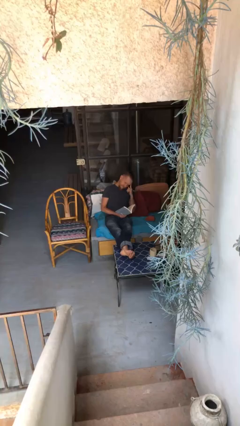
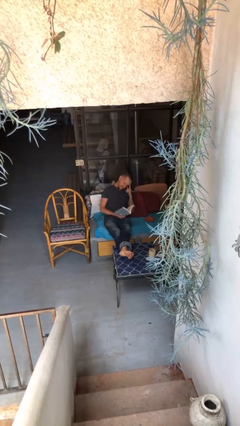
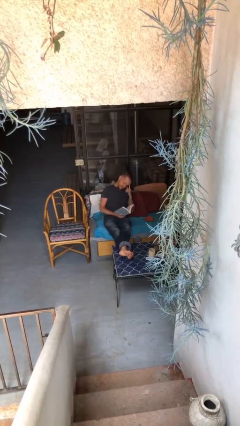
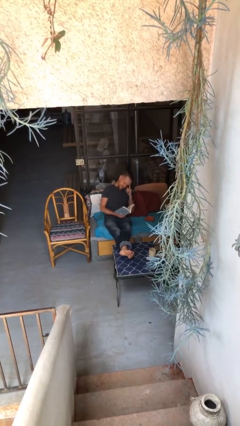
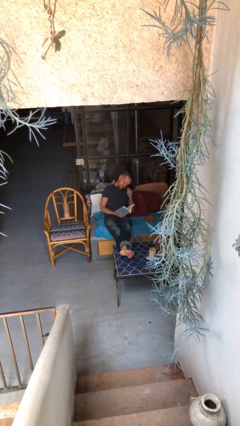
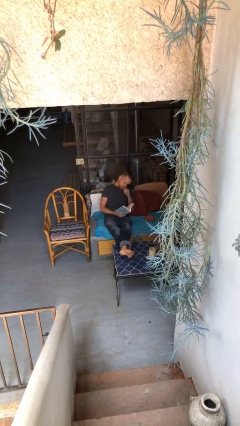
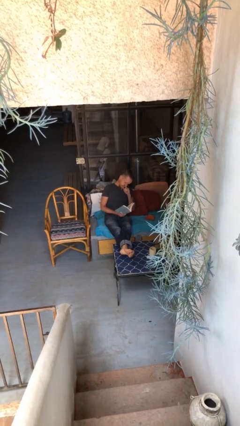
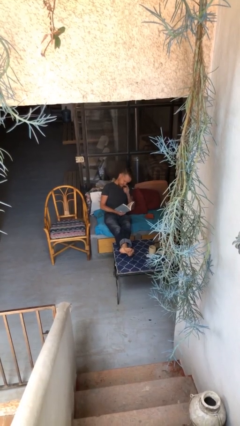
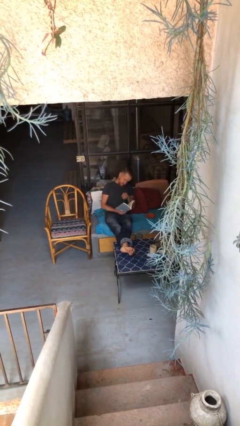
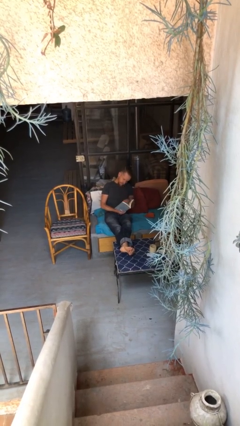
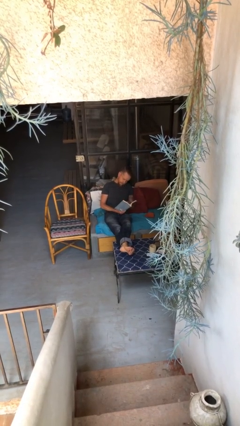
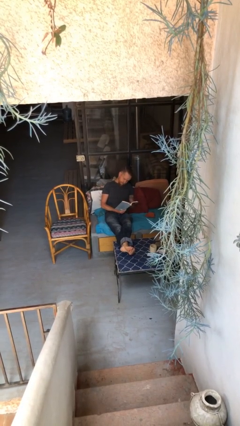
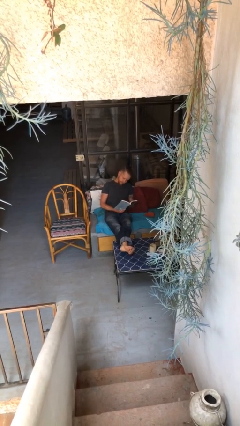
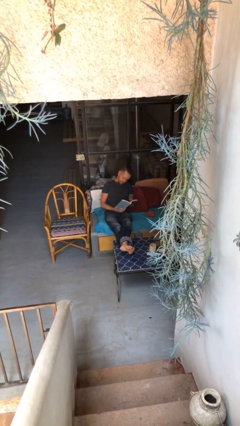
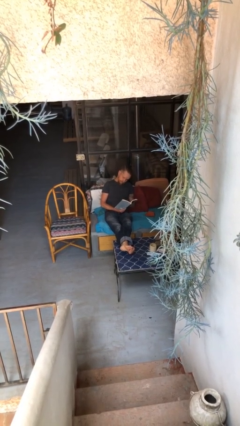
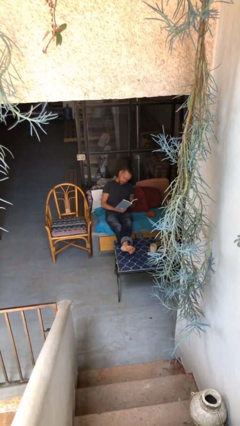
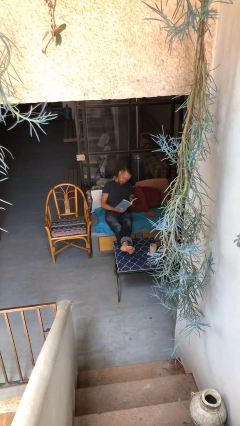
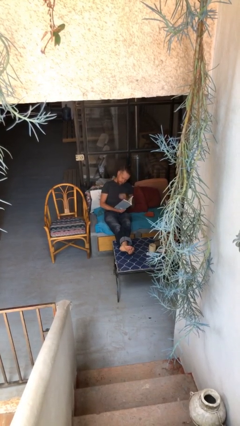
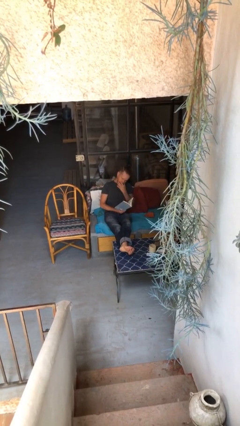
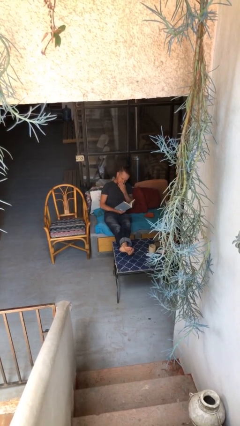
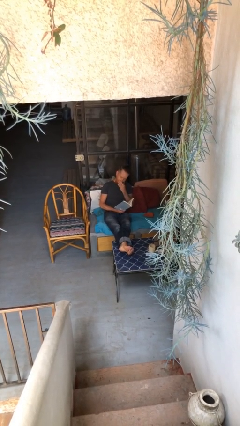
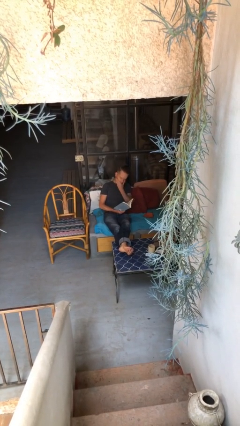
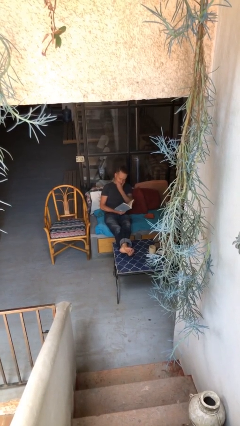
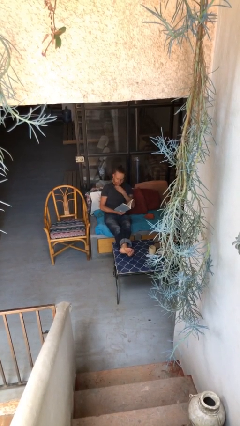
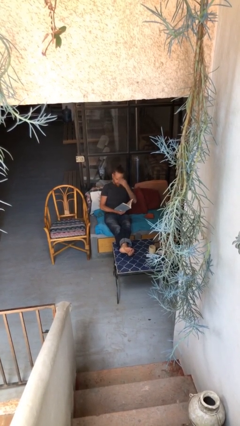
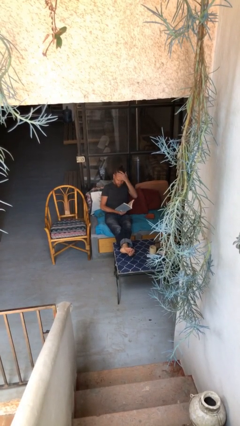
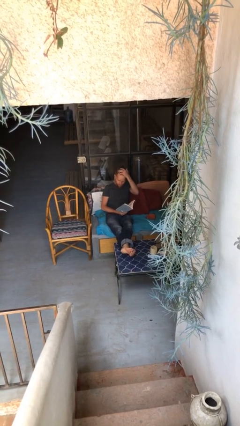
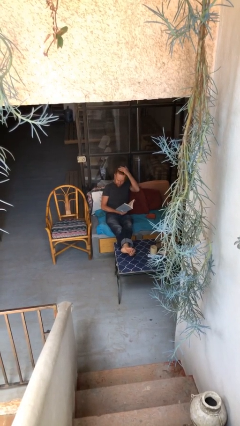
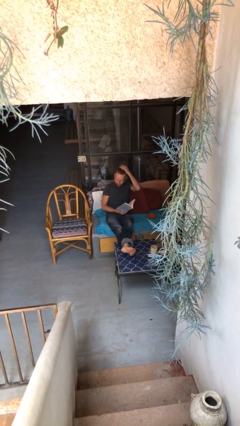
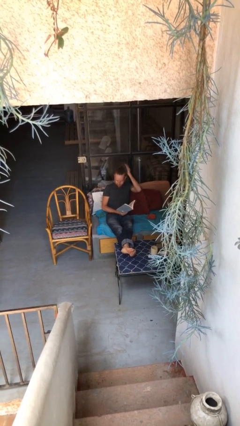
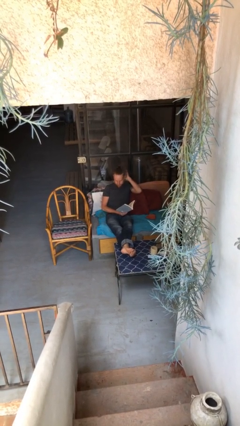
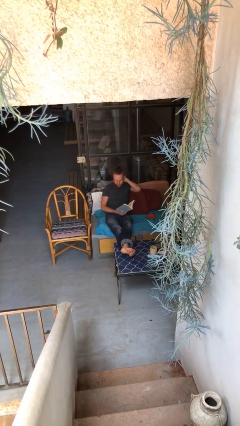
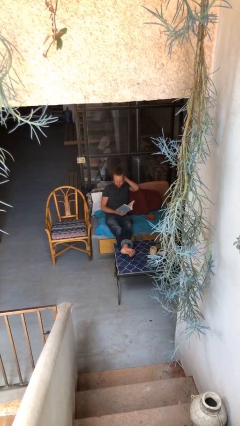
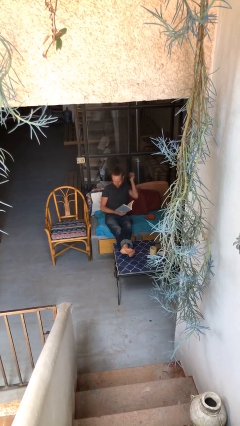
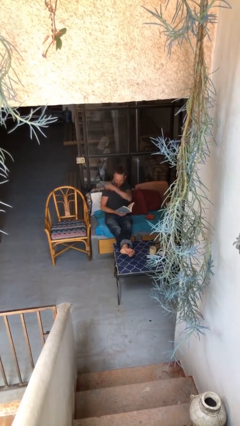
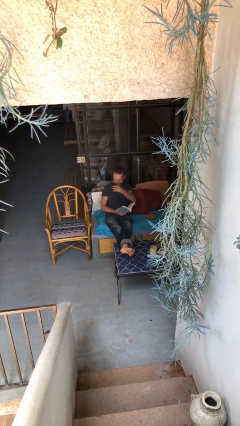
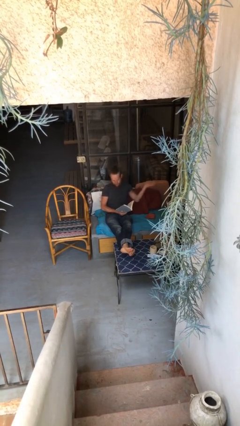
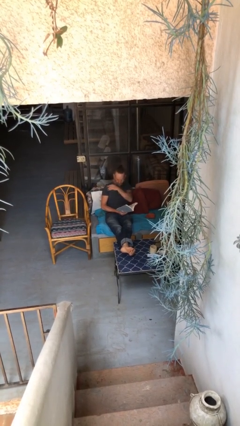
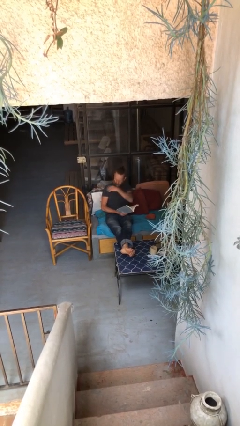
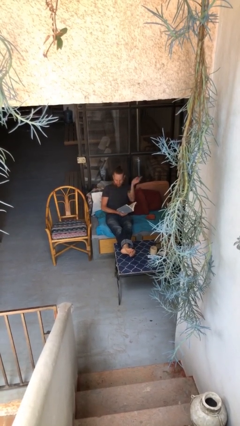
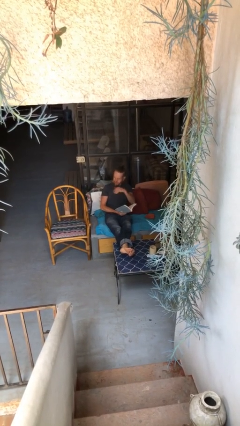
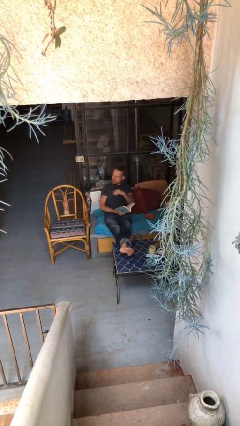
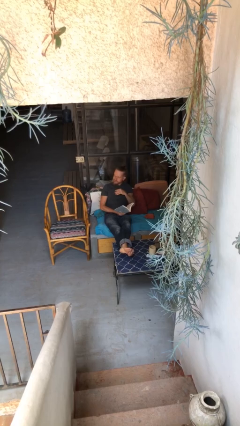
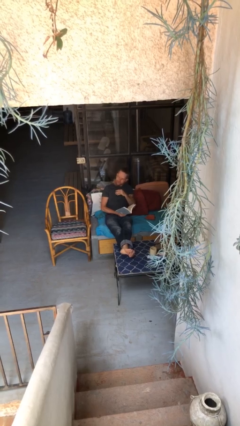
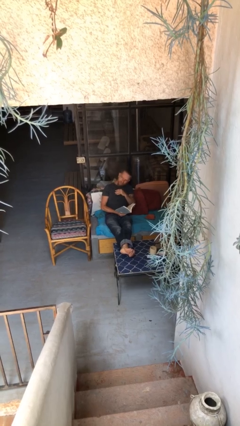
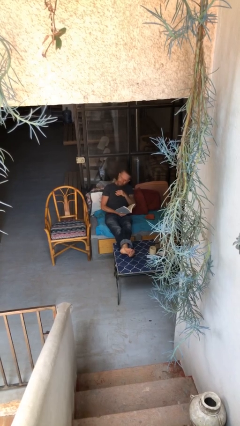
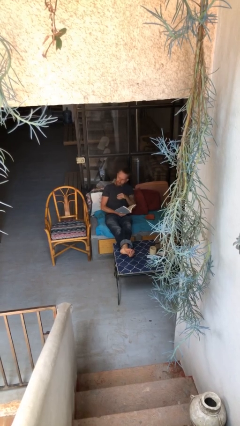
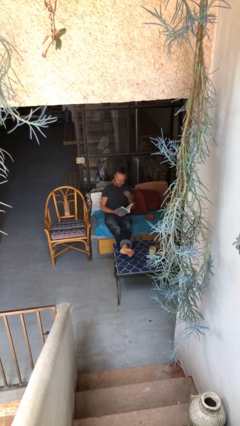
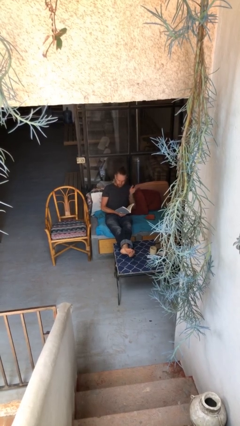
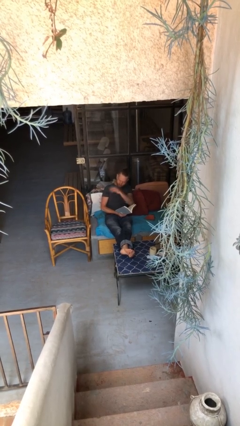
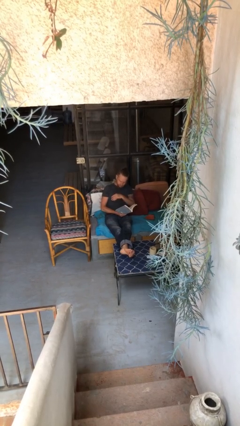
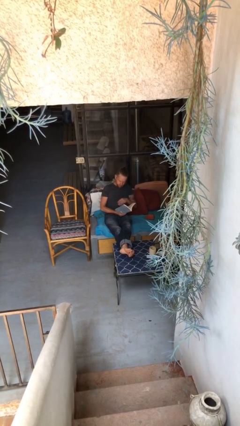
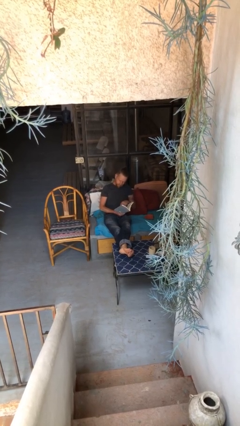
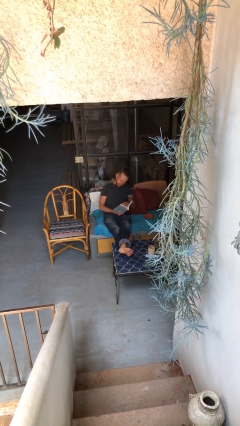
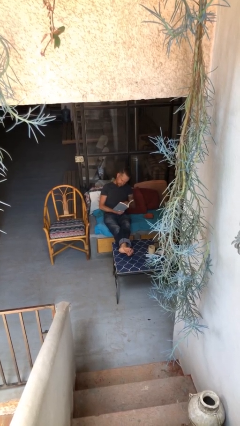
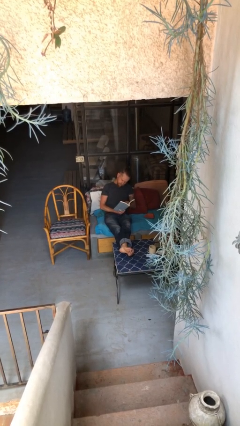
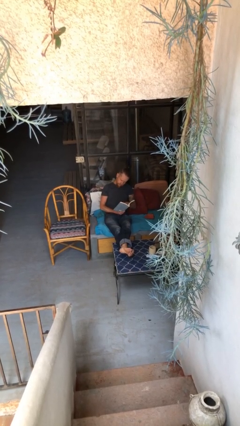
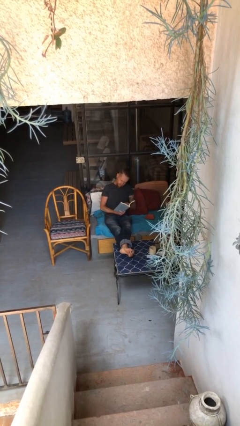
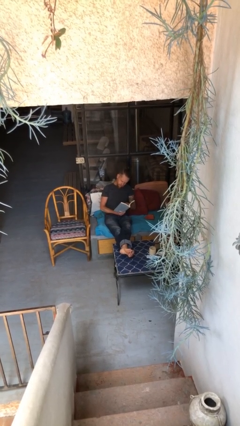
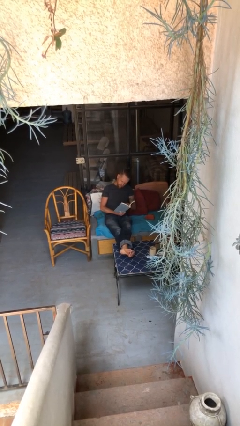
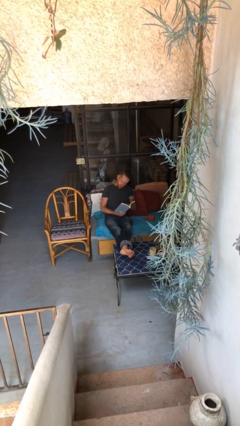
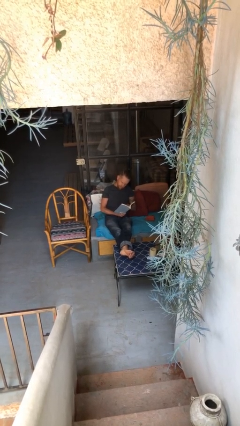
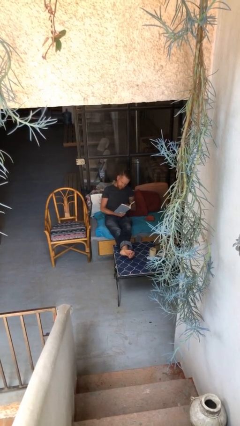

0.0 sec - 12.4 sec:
person reads document

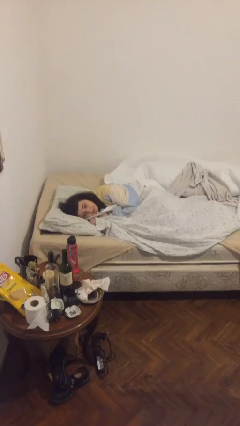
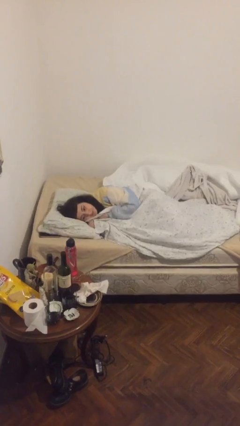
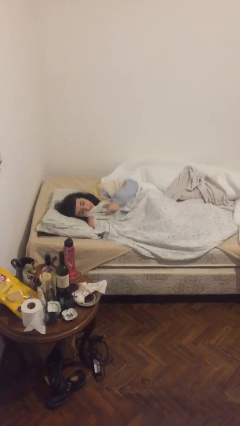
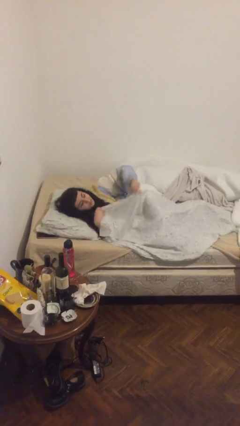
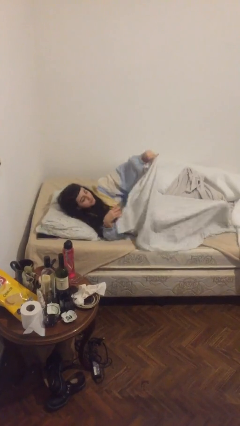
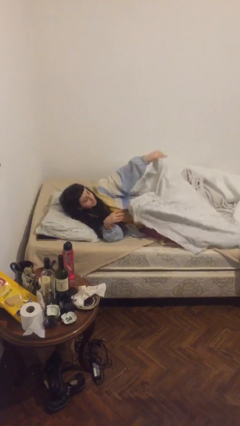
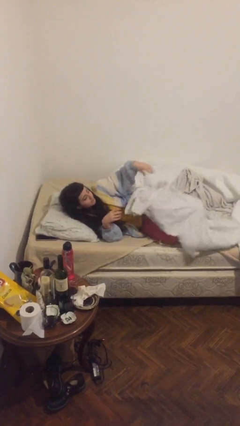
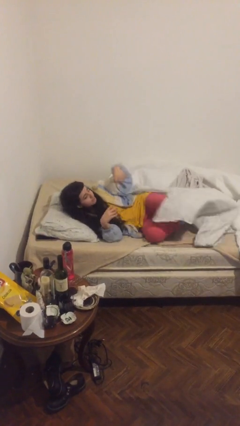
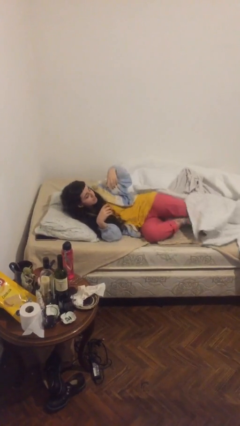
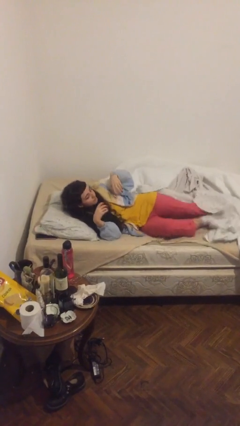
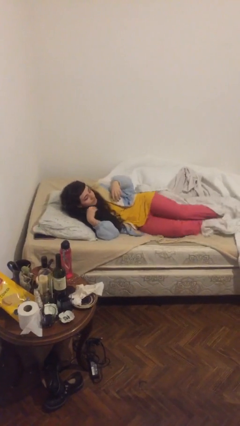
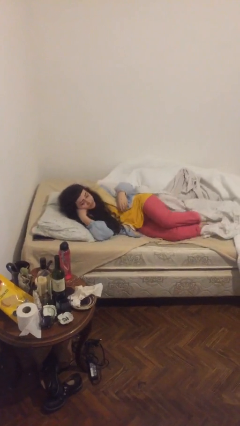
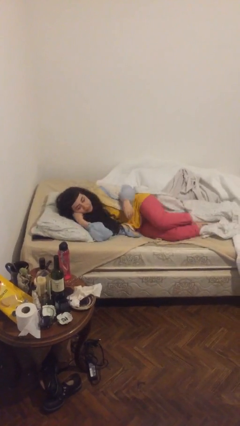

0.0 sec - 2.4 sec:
person uncovers with bedsheets

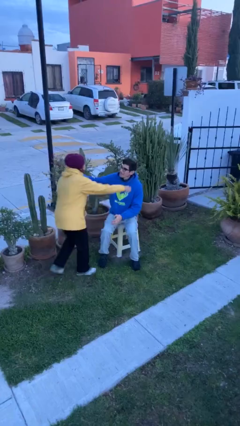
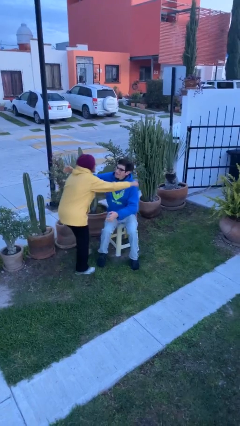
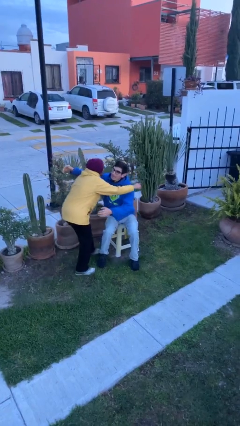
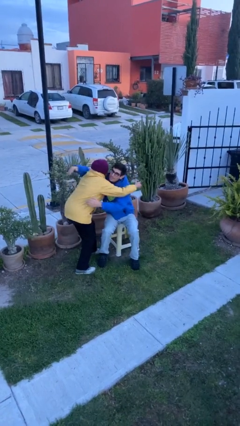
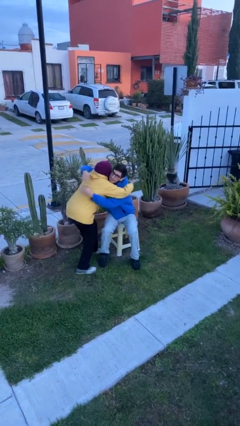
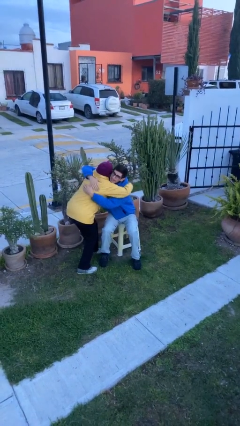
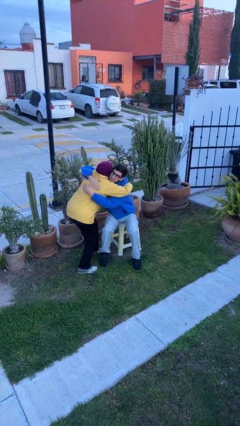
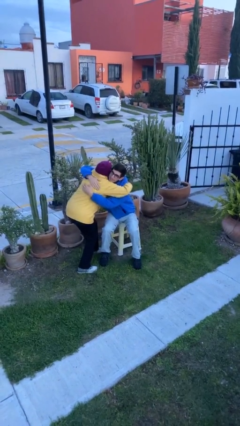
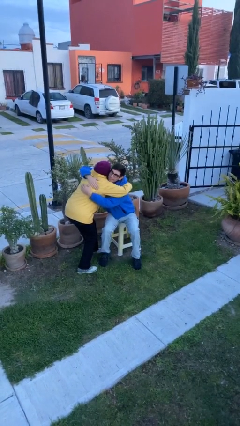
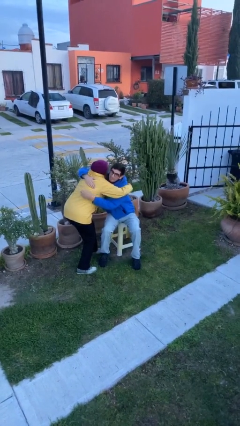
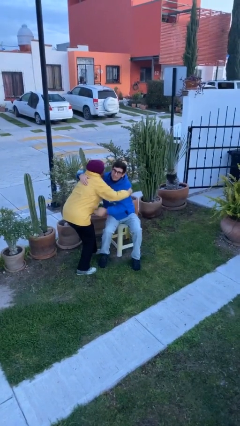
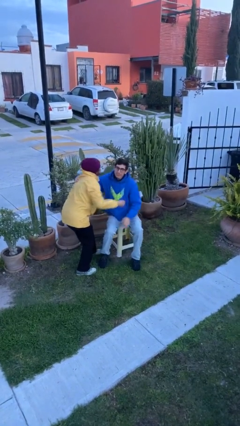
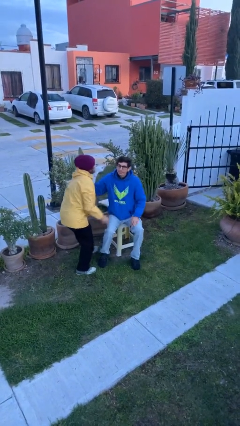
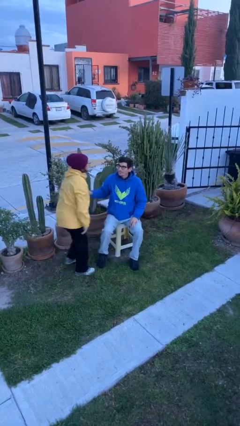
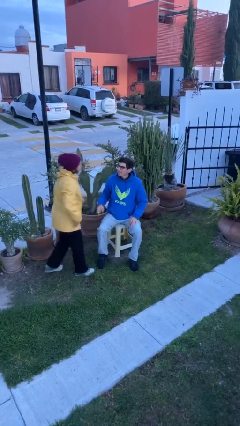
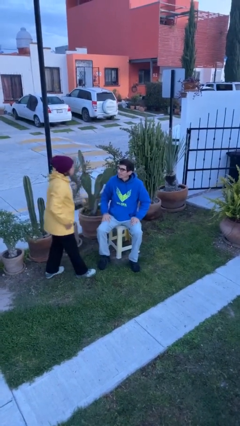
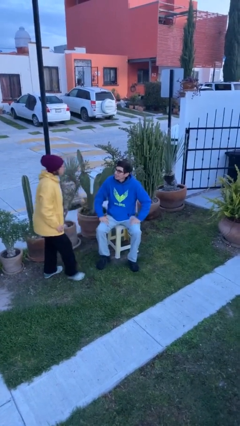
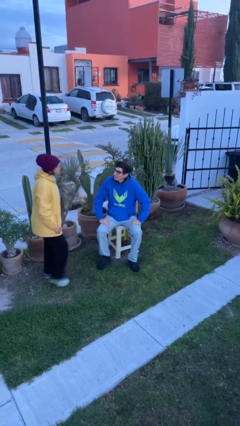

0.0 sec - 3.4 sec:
person embraces person
